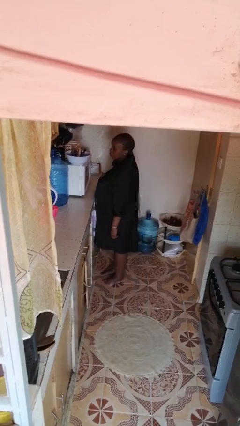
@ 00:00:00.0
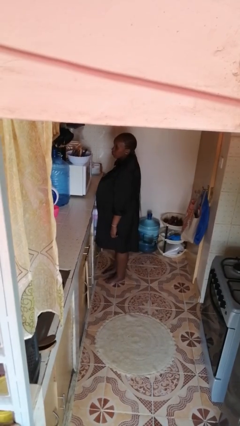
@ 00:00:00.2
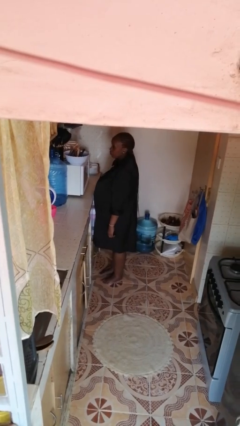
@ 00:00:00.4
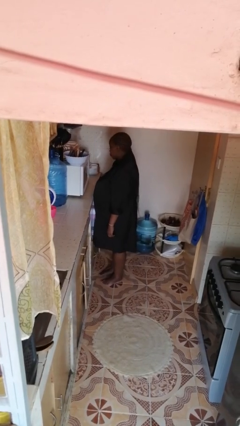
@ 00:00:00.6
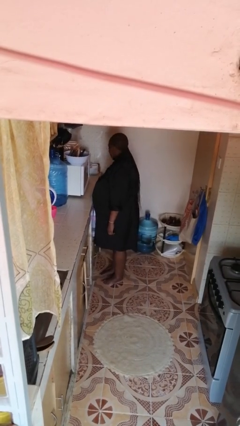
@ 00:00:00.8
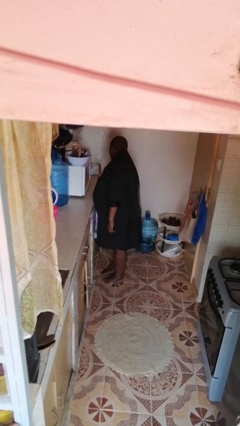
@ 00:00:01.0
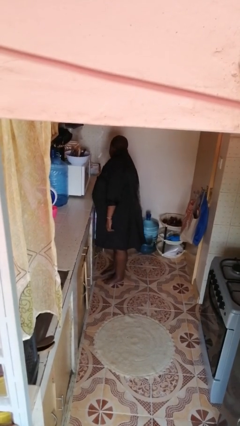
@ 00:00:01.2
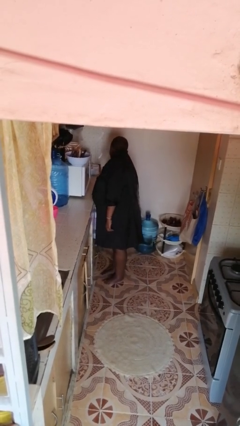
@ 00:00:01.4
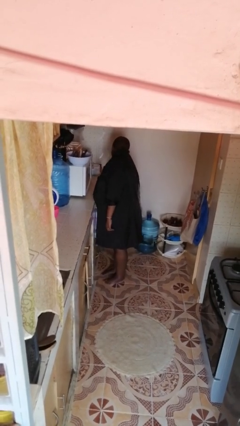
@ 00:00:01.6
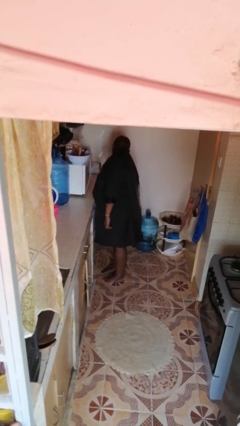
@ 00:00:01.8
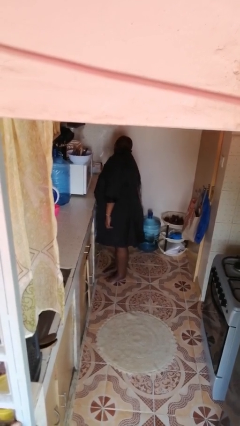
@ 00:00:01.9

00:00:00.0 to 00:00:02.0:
person opens cabinet

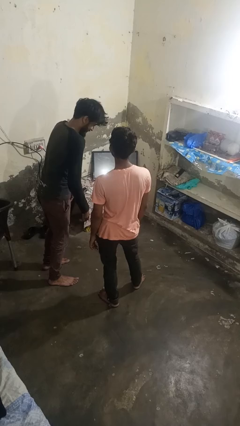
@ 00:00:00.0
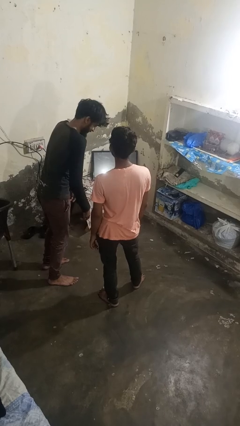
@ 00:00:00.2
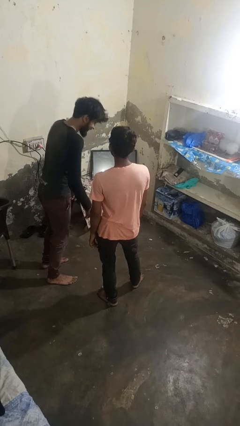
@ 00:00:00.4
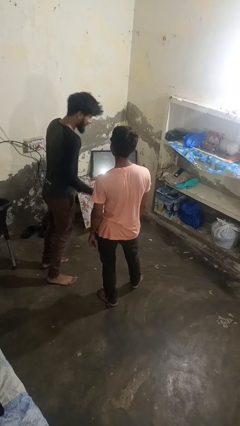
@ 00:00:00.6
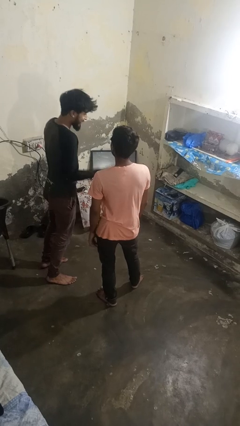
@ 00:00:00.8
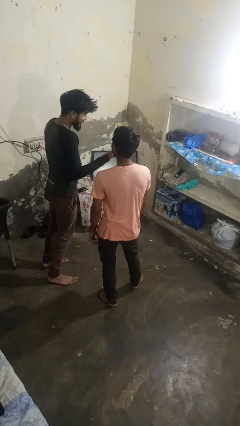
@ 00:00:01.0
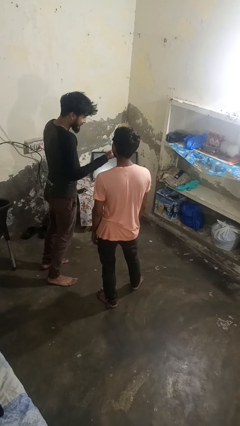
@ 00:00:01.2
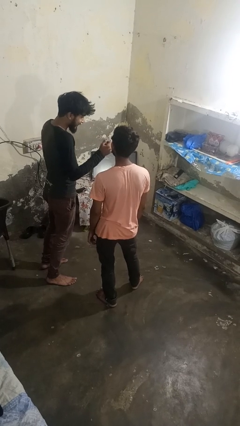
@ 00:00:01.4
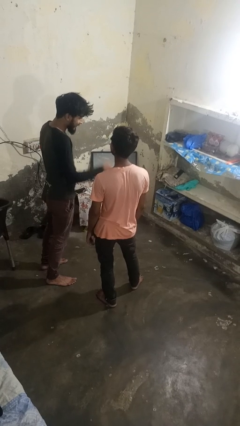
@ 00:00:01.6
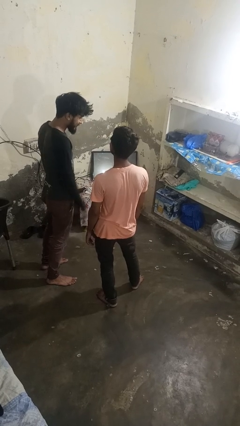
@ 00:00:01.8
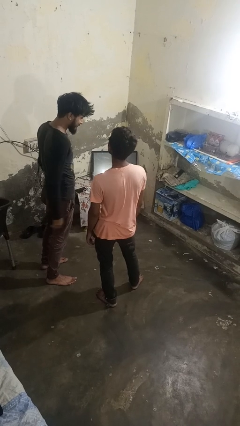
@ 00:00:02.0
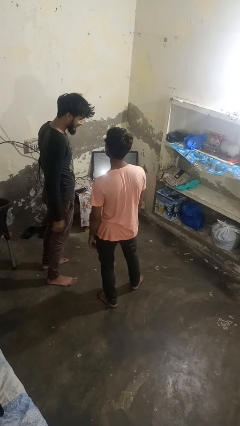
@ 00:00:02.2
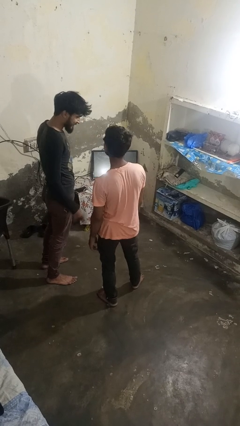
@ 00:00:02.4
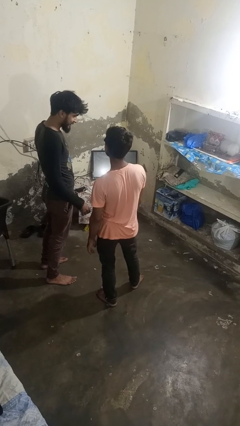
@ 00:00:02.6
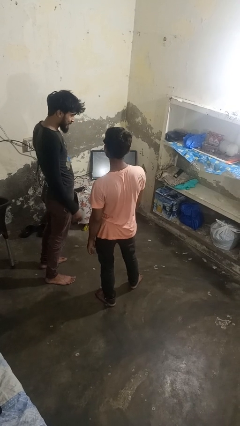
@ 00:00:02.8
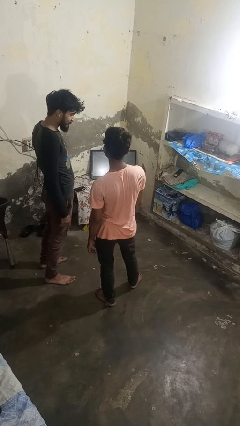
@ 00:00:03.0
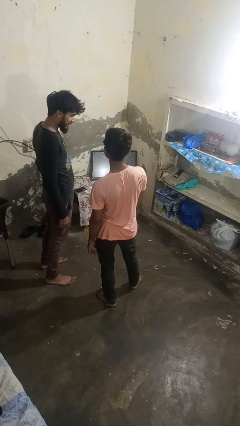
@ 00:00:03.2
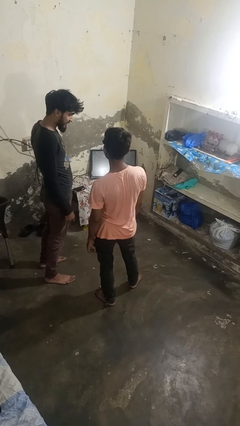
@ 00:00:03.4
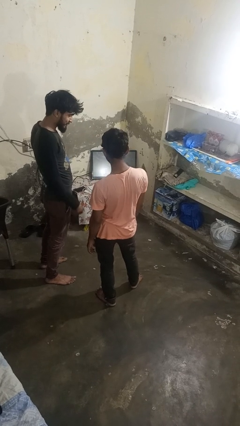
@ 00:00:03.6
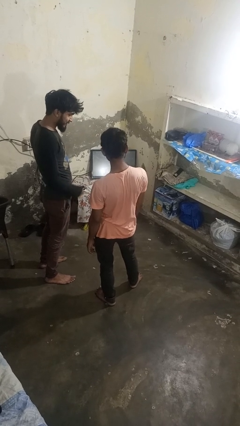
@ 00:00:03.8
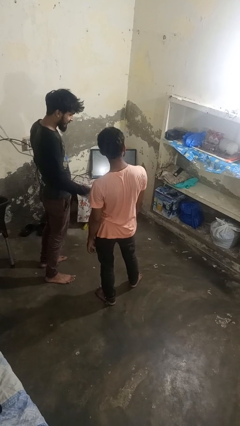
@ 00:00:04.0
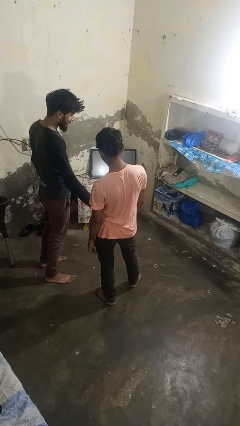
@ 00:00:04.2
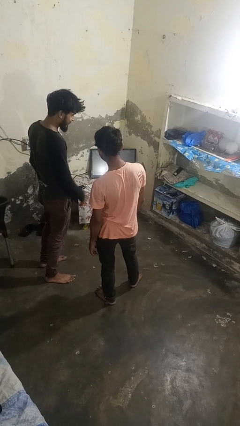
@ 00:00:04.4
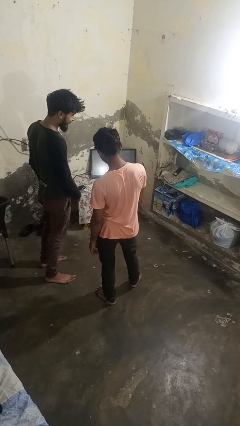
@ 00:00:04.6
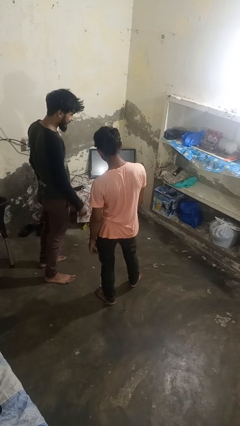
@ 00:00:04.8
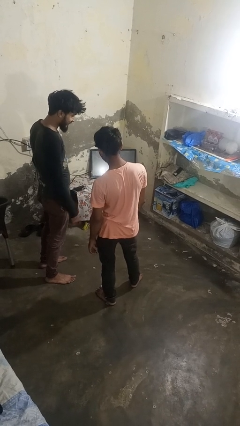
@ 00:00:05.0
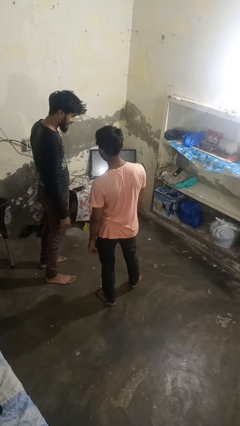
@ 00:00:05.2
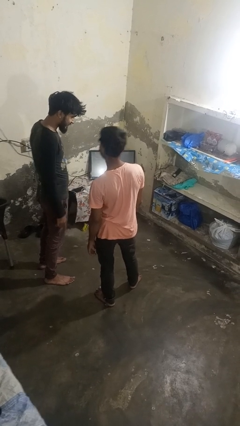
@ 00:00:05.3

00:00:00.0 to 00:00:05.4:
person laughs with person

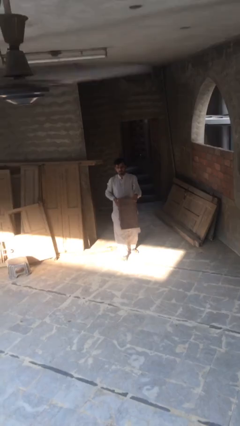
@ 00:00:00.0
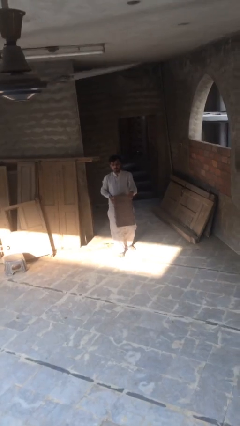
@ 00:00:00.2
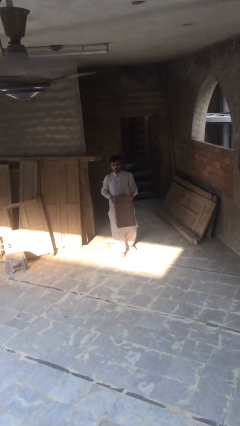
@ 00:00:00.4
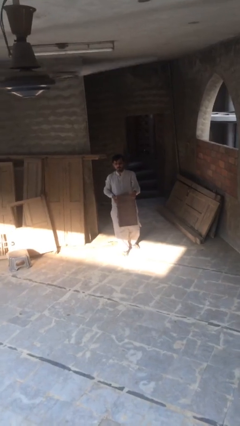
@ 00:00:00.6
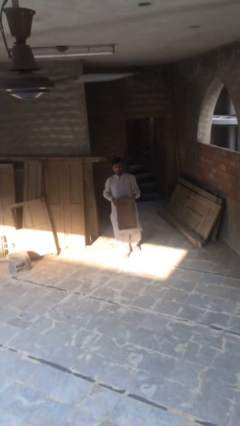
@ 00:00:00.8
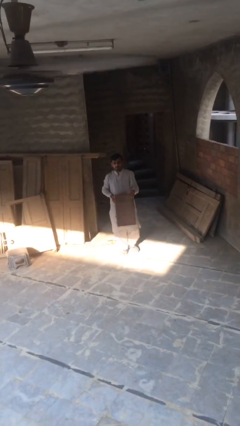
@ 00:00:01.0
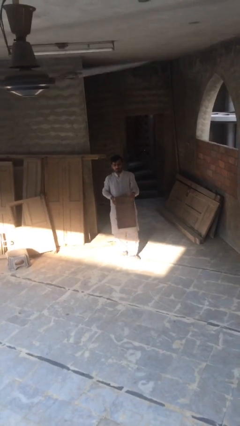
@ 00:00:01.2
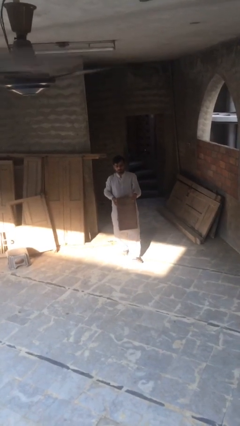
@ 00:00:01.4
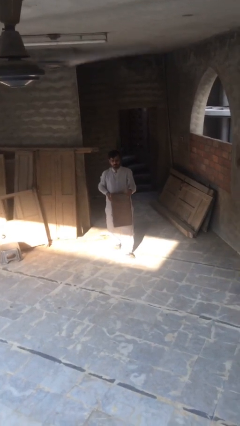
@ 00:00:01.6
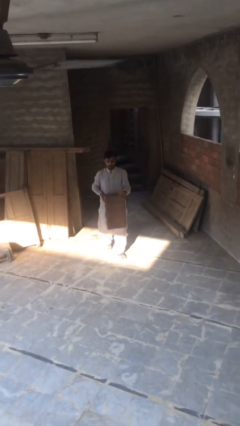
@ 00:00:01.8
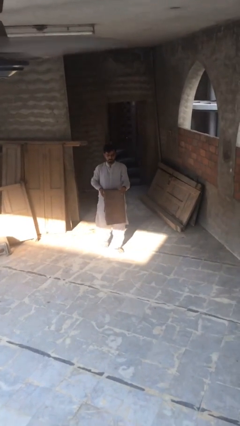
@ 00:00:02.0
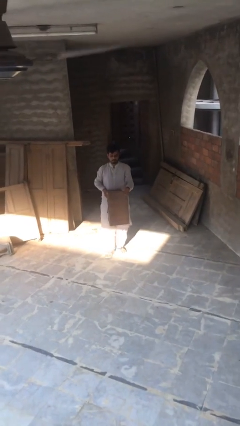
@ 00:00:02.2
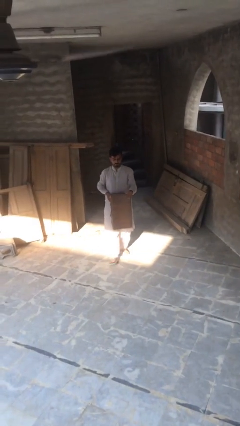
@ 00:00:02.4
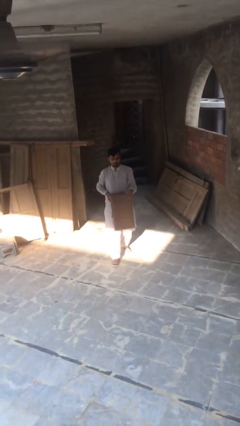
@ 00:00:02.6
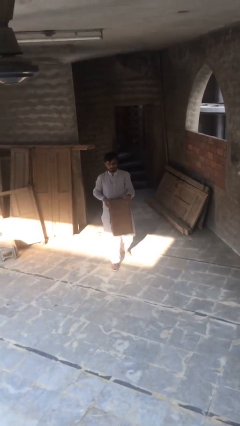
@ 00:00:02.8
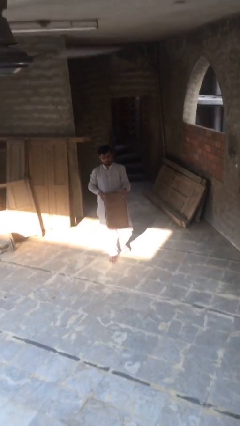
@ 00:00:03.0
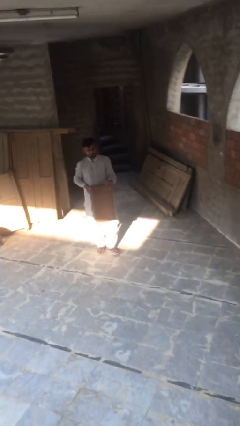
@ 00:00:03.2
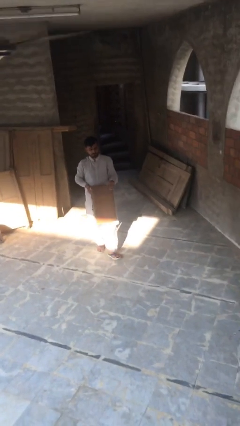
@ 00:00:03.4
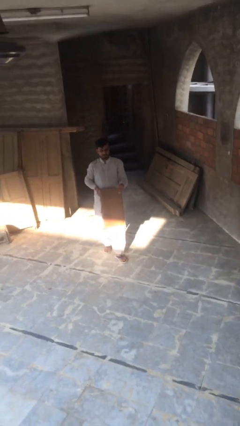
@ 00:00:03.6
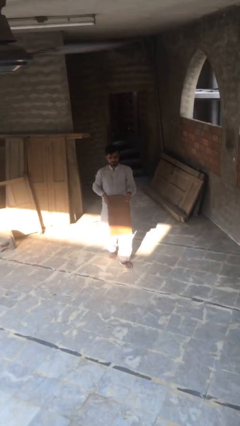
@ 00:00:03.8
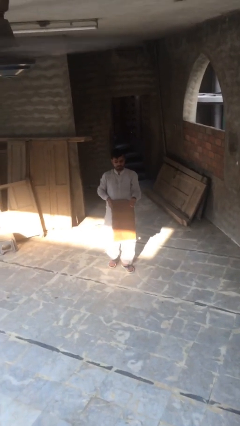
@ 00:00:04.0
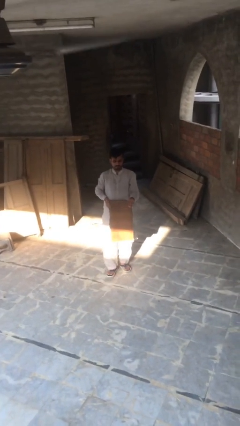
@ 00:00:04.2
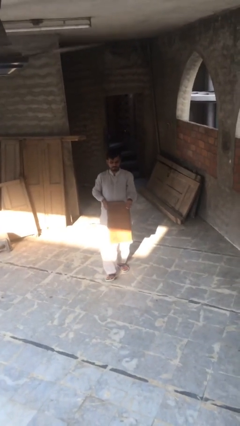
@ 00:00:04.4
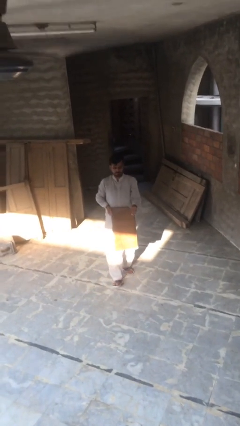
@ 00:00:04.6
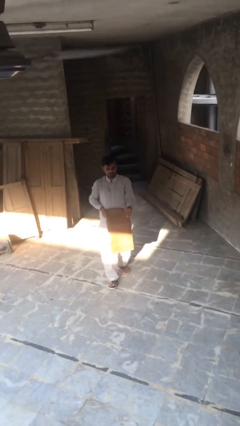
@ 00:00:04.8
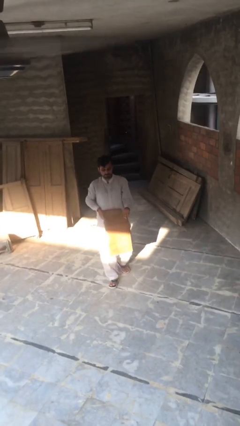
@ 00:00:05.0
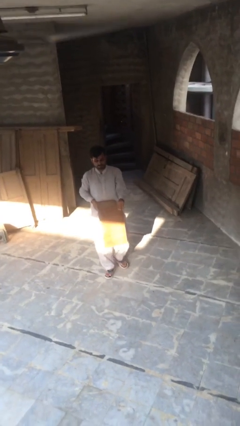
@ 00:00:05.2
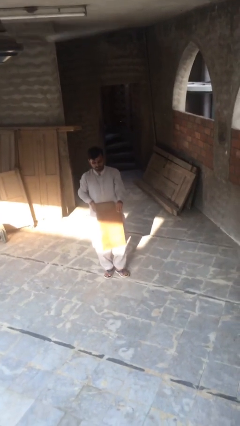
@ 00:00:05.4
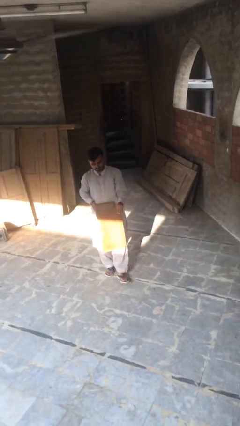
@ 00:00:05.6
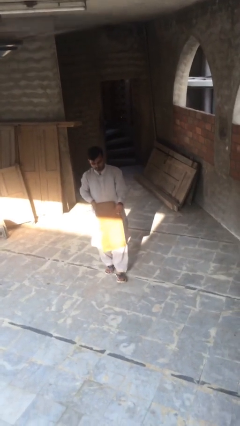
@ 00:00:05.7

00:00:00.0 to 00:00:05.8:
person carries heavy object

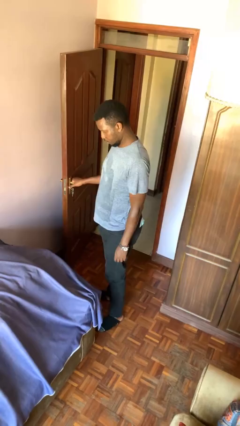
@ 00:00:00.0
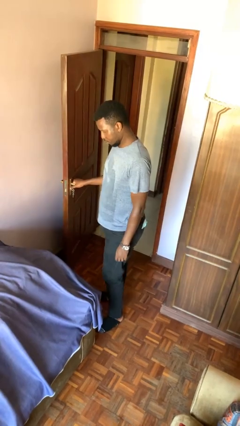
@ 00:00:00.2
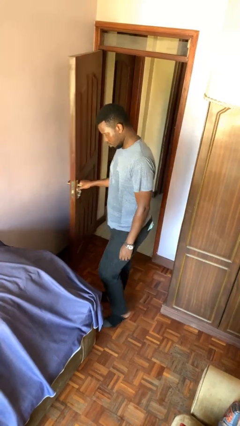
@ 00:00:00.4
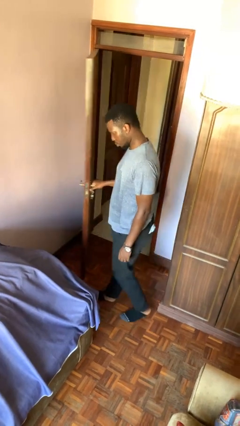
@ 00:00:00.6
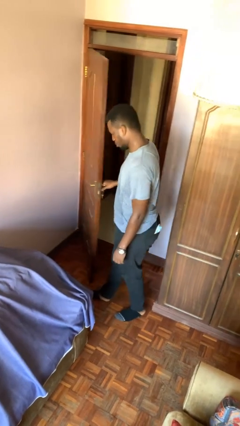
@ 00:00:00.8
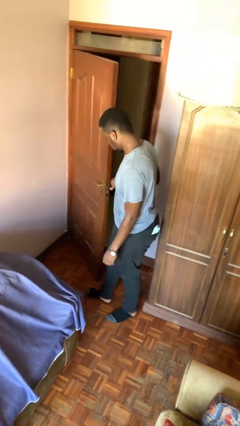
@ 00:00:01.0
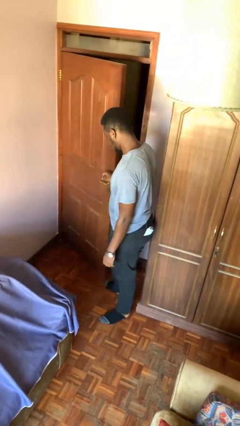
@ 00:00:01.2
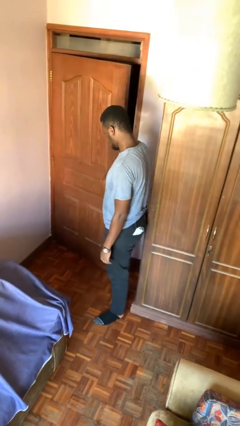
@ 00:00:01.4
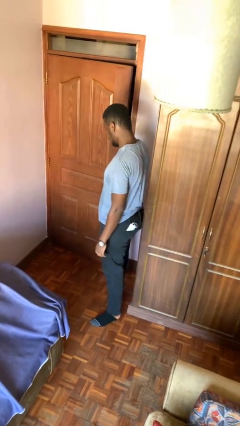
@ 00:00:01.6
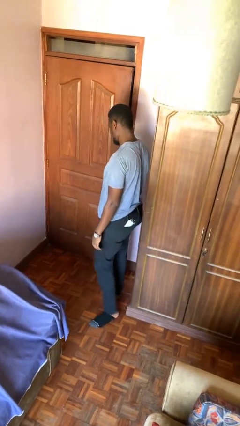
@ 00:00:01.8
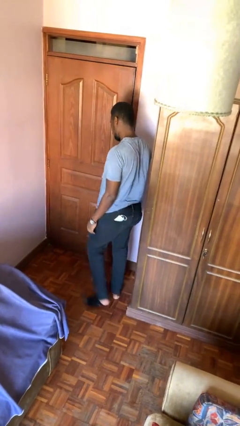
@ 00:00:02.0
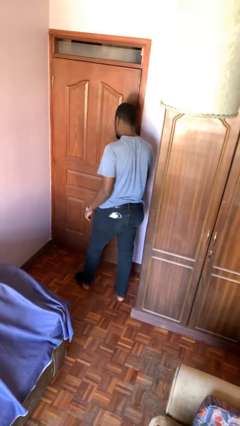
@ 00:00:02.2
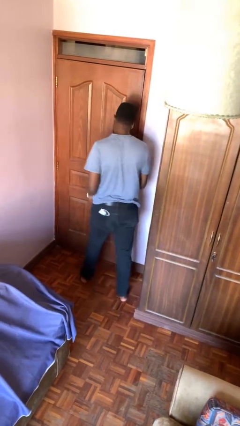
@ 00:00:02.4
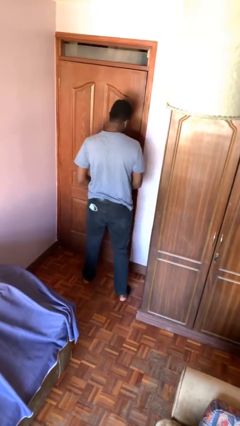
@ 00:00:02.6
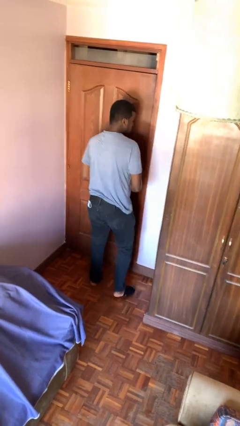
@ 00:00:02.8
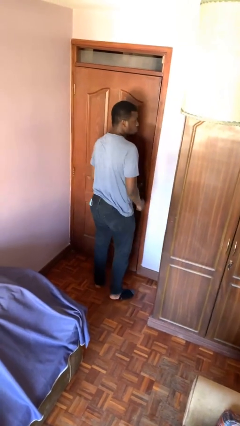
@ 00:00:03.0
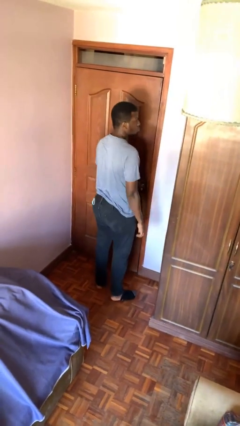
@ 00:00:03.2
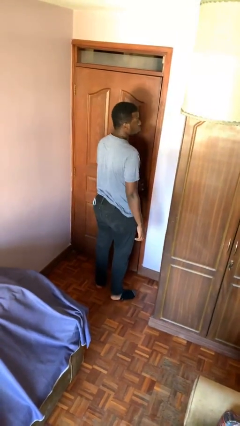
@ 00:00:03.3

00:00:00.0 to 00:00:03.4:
person closes facility door

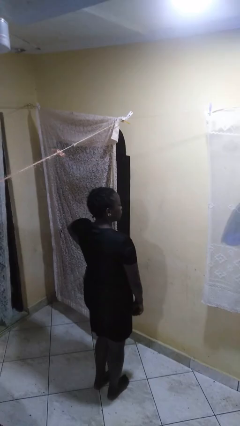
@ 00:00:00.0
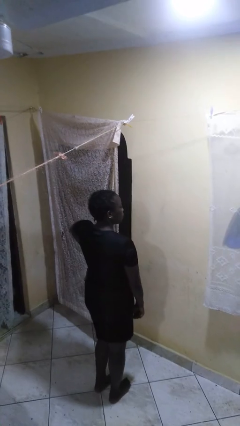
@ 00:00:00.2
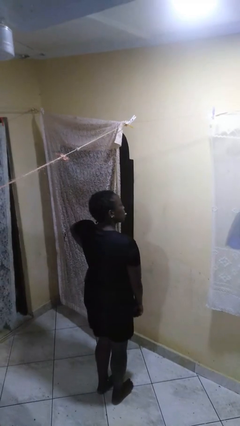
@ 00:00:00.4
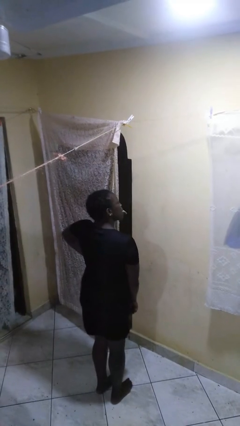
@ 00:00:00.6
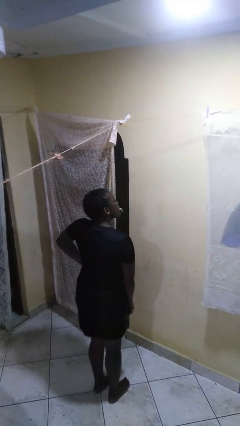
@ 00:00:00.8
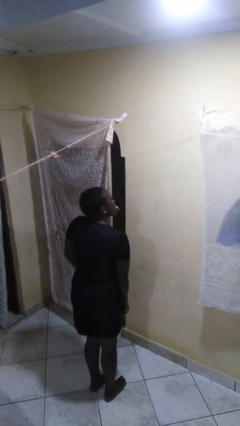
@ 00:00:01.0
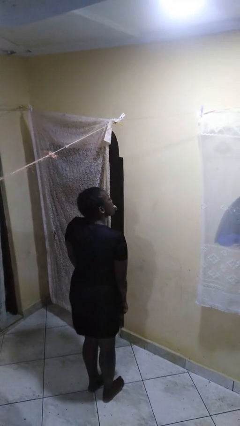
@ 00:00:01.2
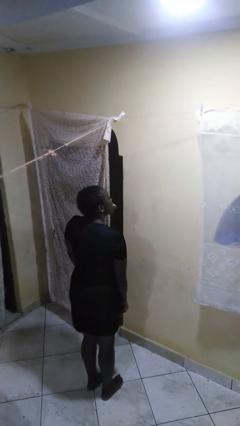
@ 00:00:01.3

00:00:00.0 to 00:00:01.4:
person sticks out tongue
